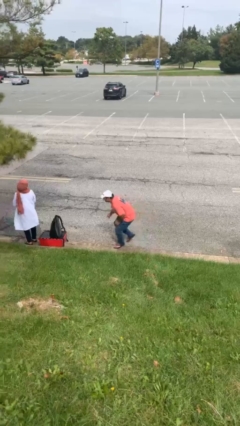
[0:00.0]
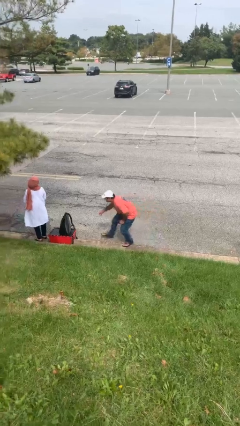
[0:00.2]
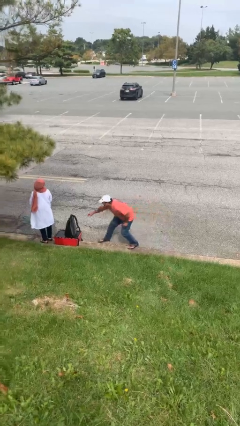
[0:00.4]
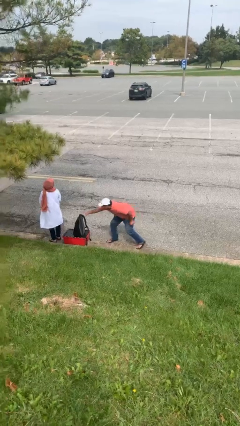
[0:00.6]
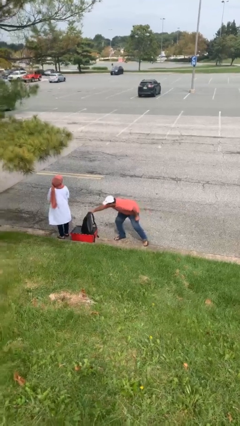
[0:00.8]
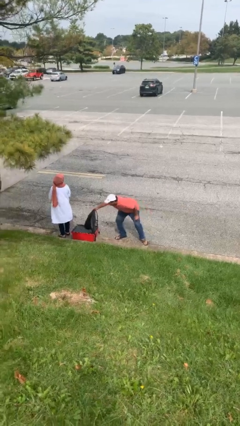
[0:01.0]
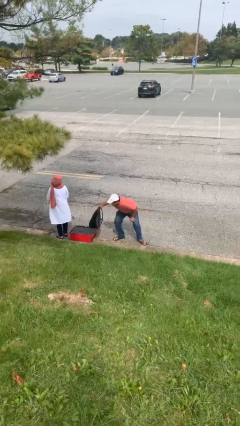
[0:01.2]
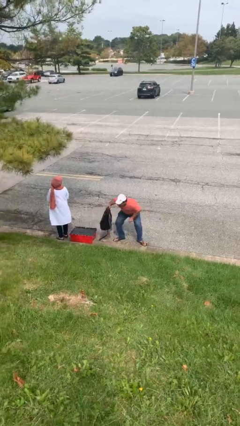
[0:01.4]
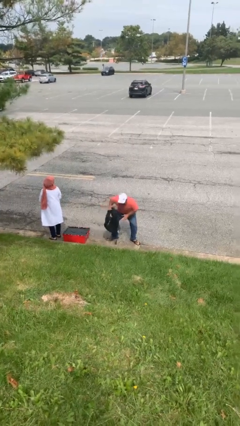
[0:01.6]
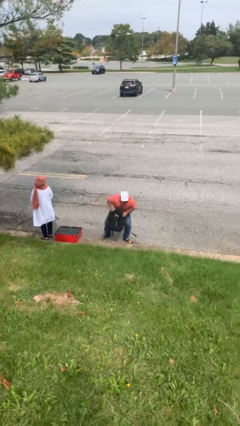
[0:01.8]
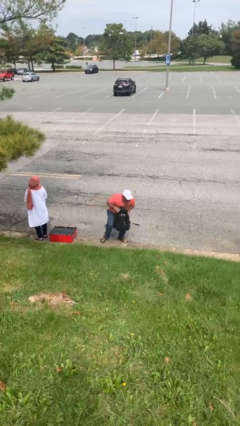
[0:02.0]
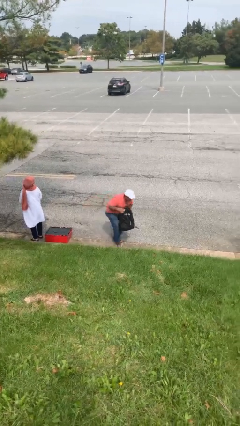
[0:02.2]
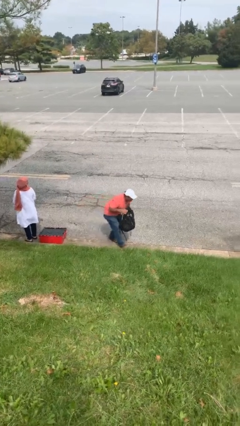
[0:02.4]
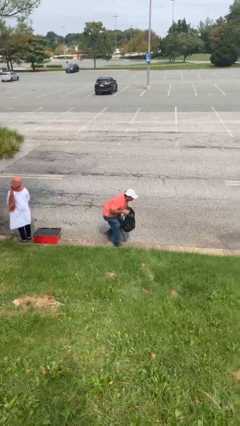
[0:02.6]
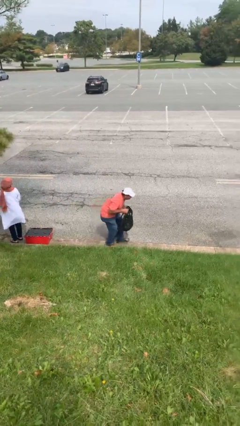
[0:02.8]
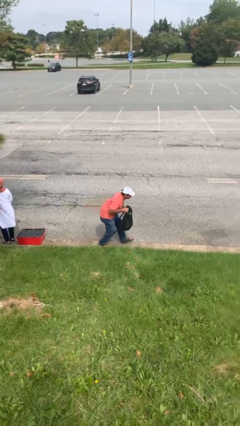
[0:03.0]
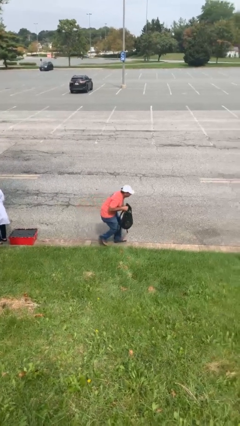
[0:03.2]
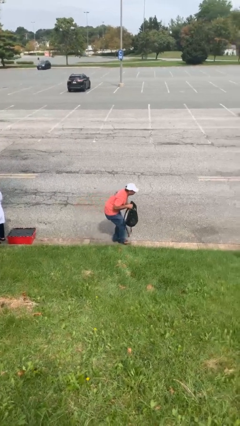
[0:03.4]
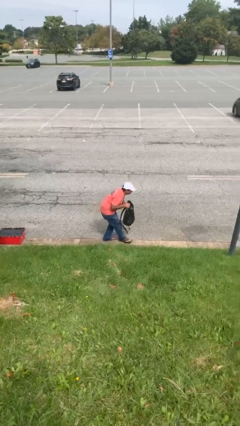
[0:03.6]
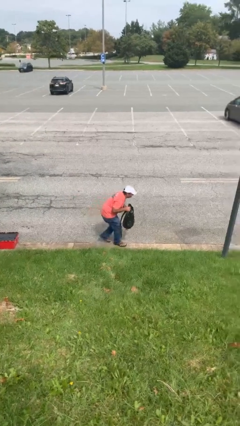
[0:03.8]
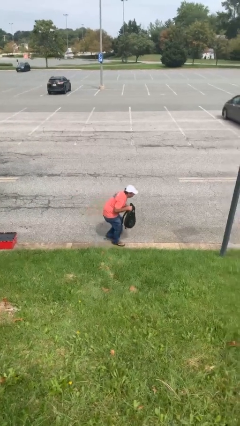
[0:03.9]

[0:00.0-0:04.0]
person steals object from person

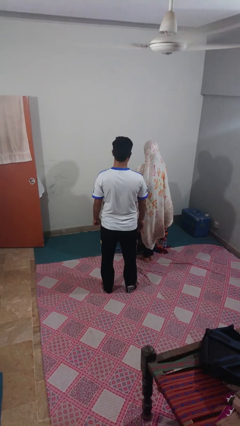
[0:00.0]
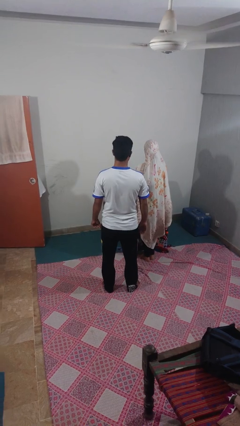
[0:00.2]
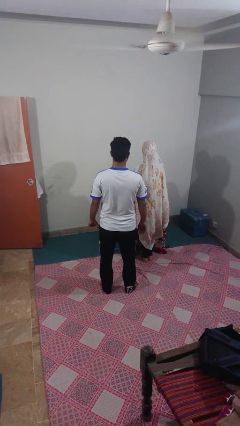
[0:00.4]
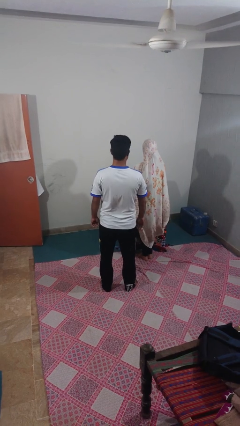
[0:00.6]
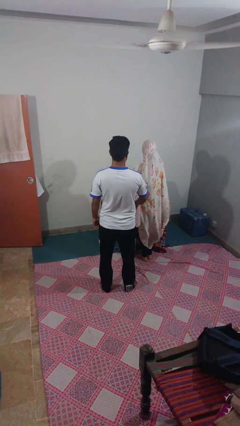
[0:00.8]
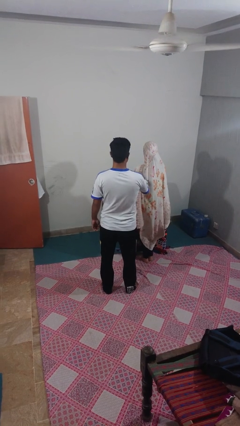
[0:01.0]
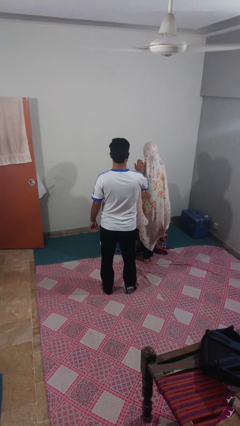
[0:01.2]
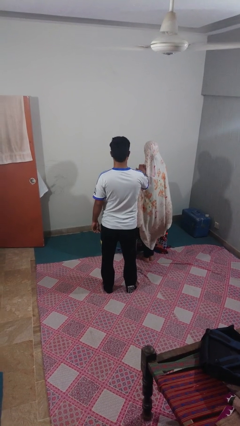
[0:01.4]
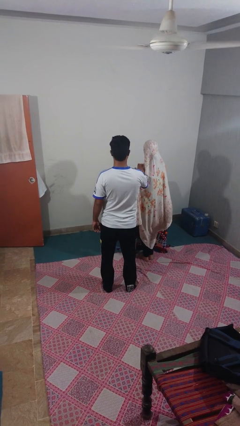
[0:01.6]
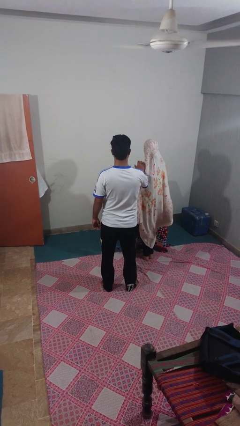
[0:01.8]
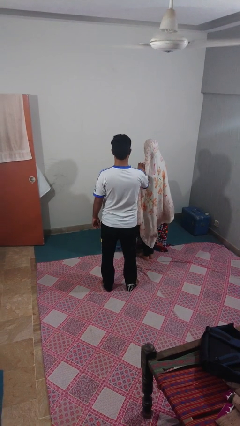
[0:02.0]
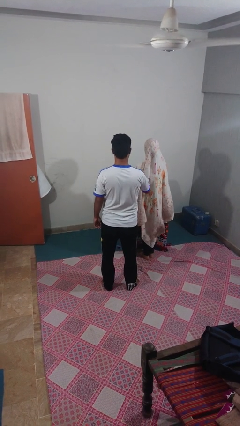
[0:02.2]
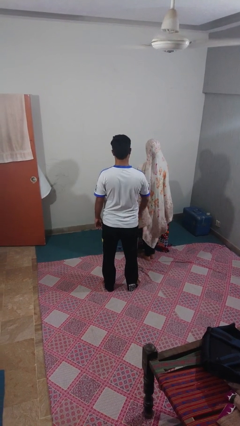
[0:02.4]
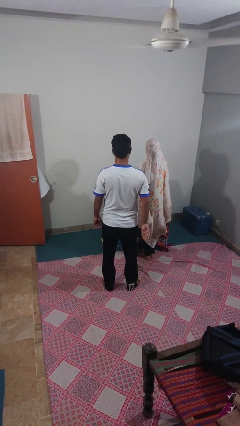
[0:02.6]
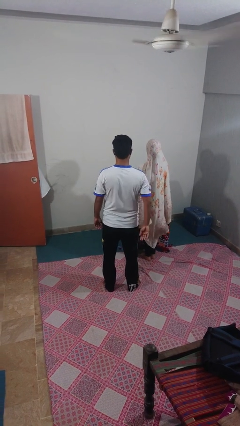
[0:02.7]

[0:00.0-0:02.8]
person touches back of person

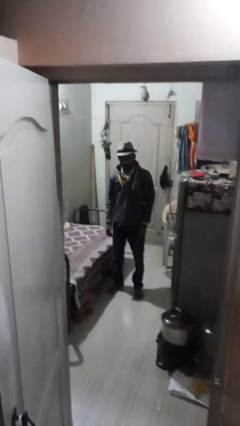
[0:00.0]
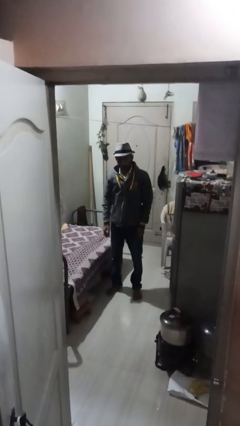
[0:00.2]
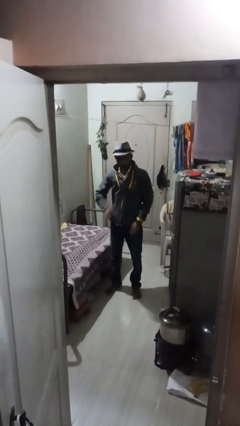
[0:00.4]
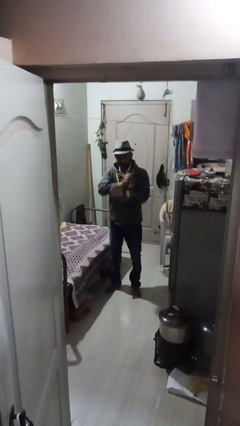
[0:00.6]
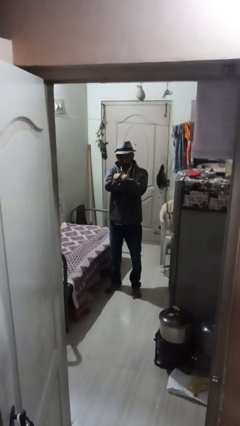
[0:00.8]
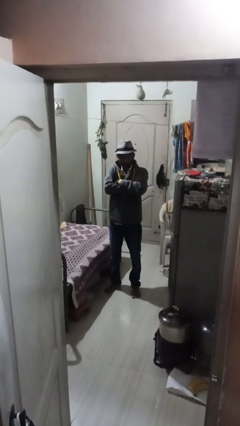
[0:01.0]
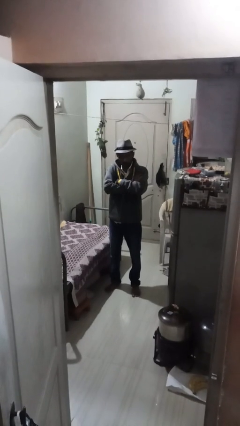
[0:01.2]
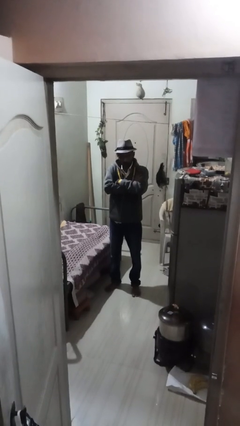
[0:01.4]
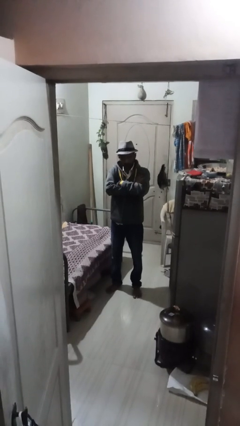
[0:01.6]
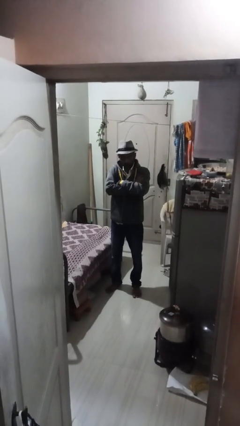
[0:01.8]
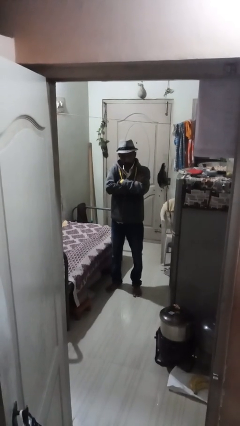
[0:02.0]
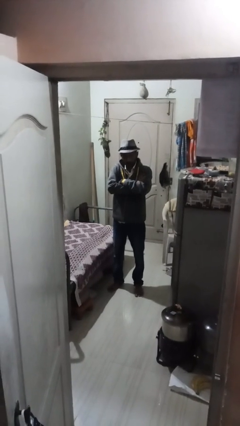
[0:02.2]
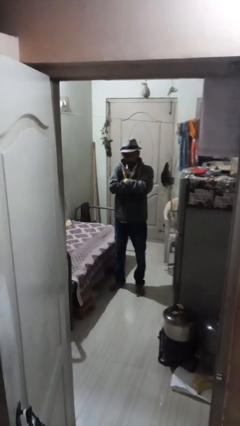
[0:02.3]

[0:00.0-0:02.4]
person crosses arms

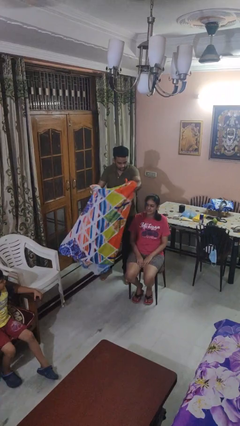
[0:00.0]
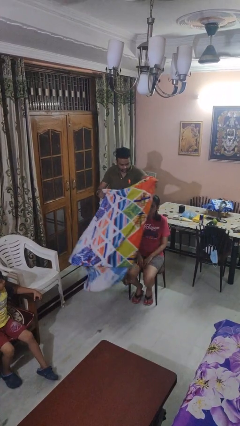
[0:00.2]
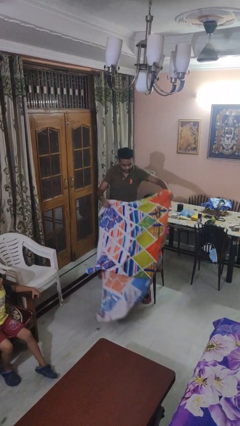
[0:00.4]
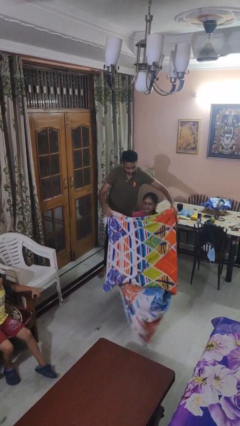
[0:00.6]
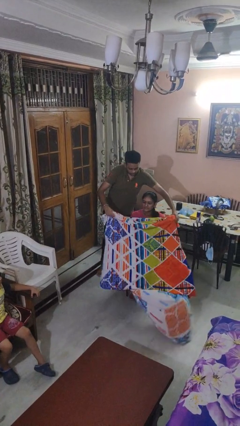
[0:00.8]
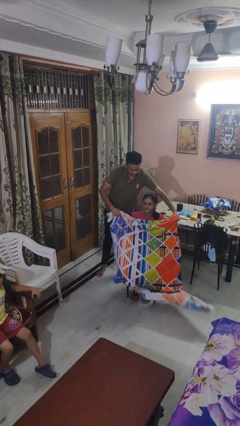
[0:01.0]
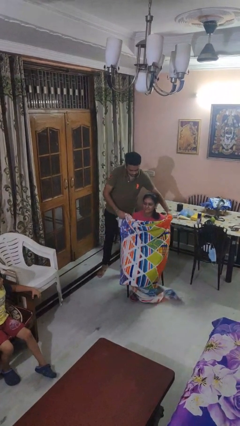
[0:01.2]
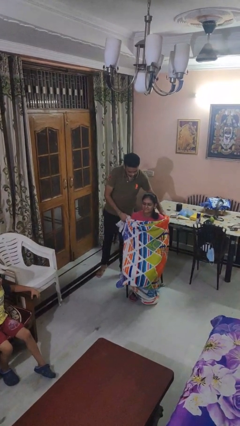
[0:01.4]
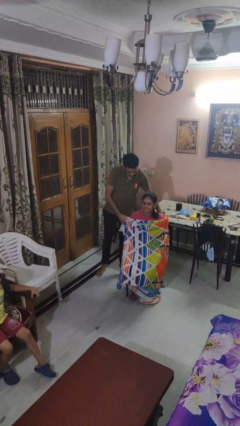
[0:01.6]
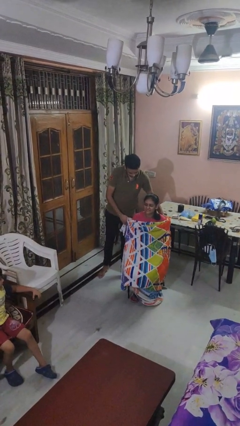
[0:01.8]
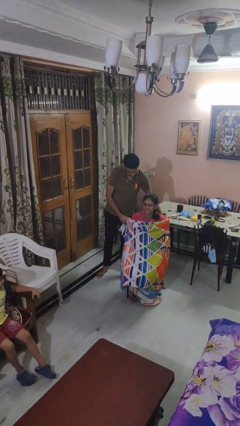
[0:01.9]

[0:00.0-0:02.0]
person covers friend with blanket

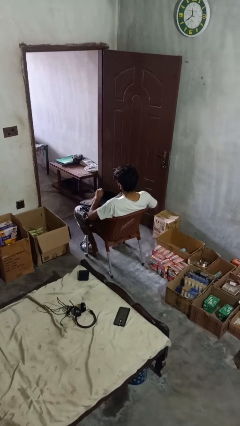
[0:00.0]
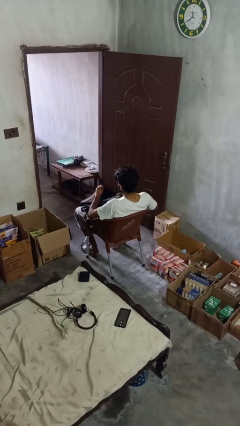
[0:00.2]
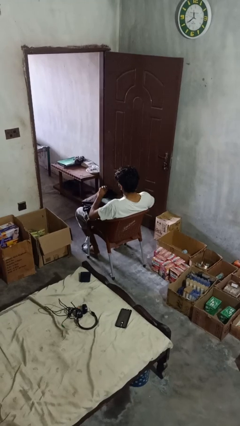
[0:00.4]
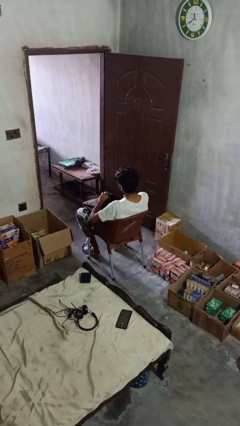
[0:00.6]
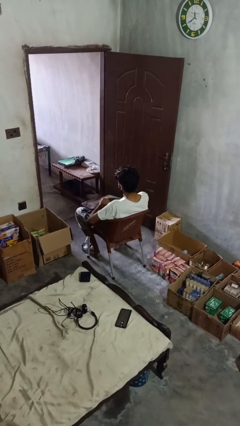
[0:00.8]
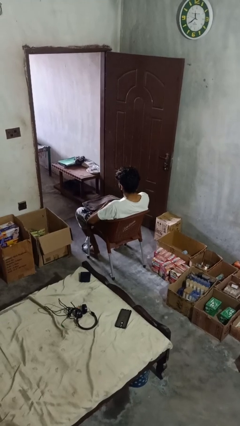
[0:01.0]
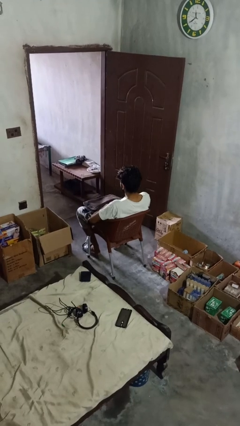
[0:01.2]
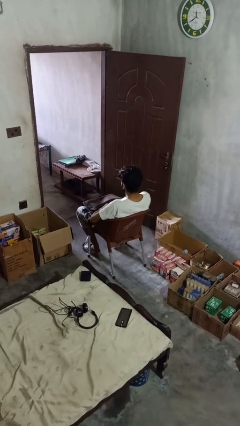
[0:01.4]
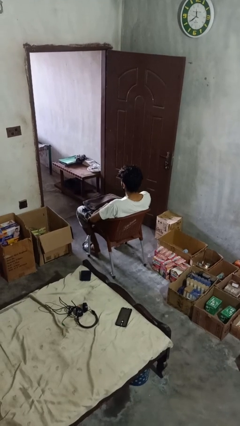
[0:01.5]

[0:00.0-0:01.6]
person puts object into backpack

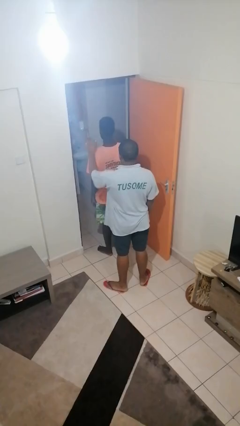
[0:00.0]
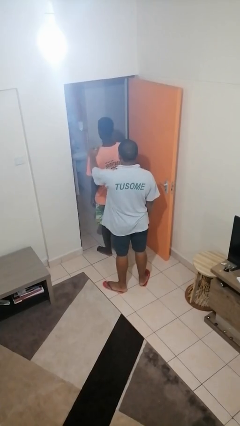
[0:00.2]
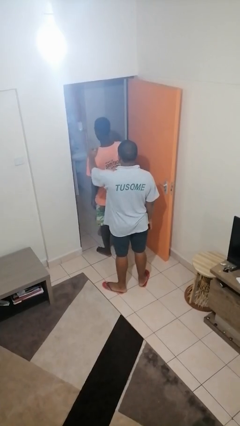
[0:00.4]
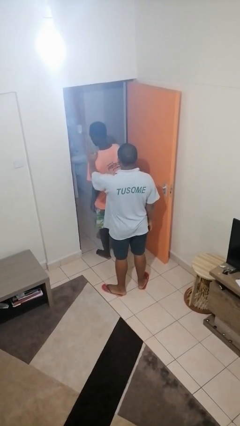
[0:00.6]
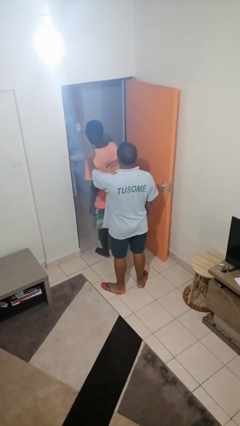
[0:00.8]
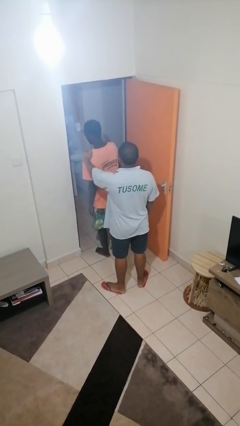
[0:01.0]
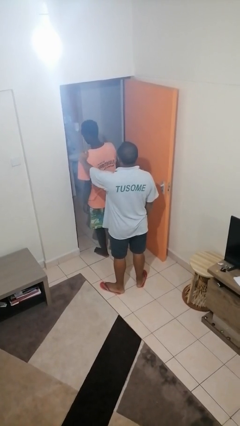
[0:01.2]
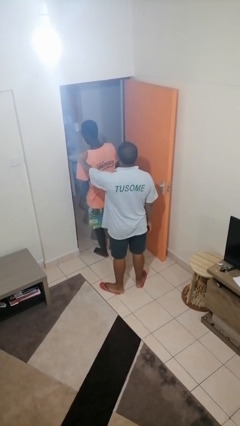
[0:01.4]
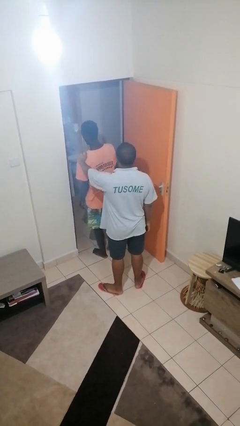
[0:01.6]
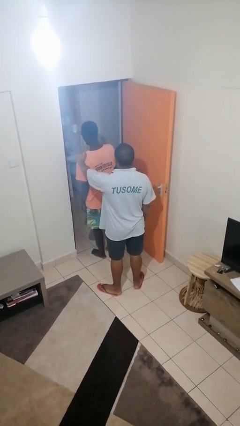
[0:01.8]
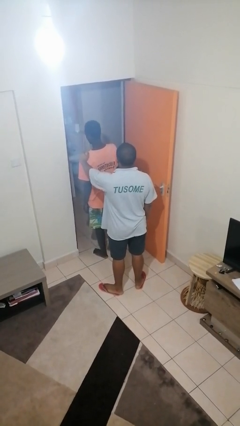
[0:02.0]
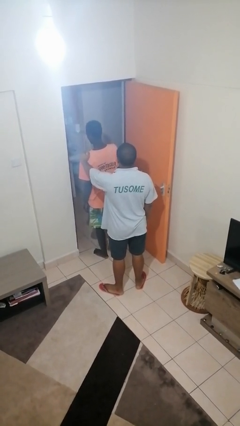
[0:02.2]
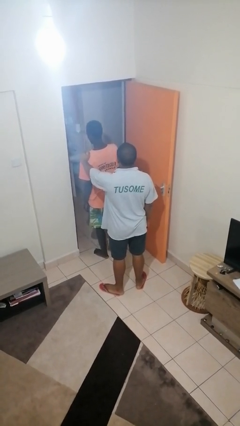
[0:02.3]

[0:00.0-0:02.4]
person grabs person by shoulder

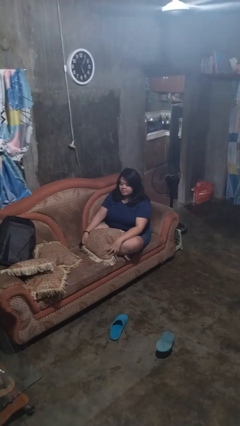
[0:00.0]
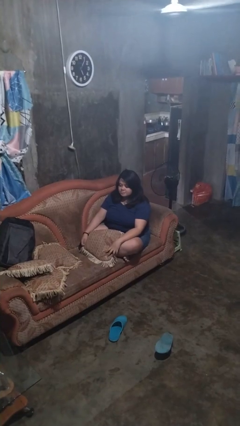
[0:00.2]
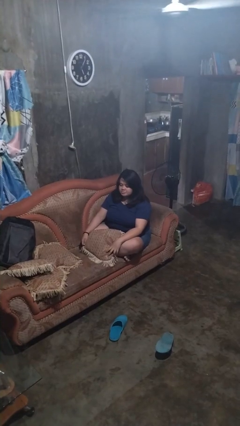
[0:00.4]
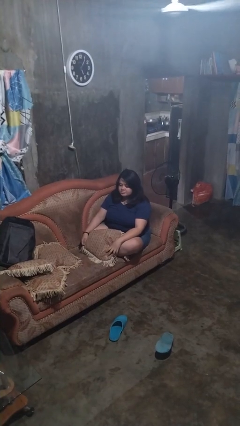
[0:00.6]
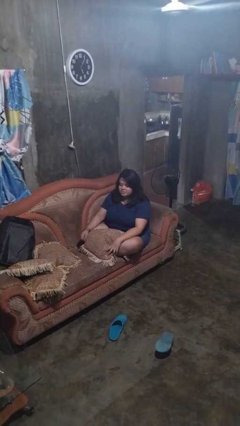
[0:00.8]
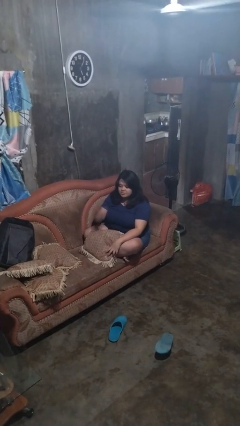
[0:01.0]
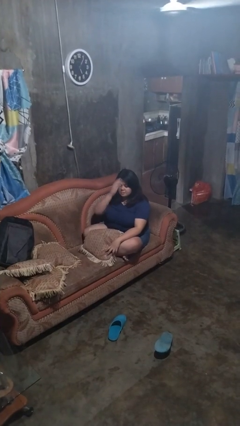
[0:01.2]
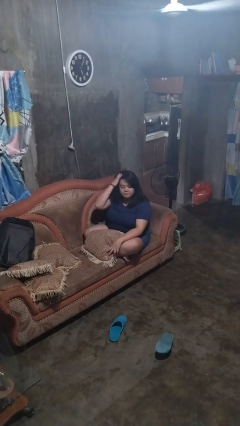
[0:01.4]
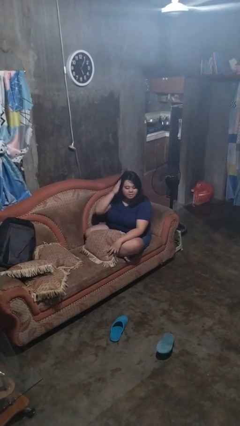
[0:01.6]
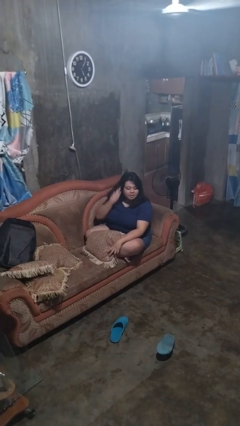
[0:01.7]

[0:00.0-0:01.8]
person strokes hair
